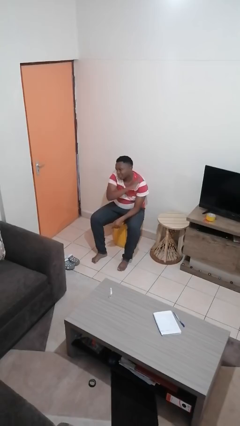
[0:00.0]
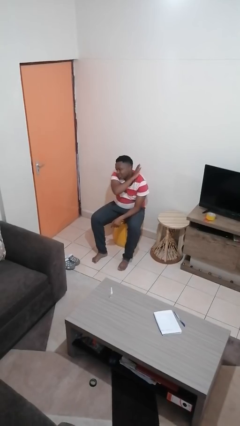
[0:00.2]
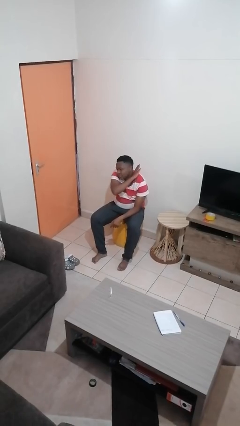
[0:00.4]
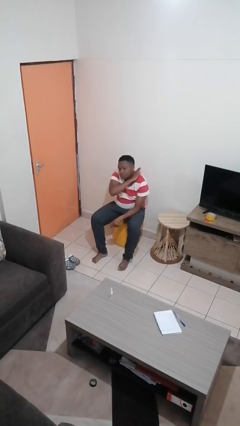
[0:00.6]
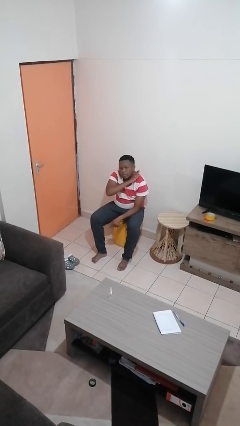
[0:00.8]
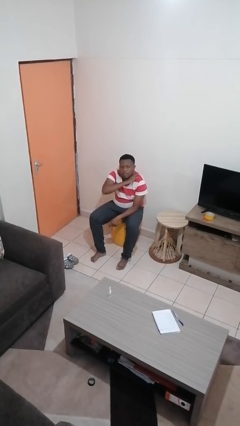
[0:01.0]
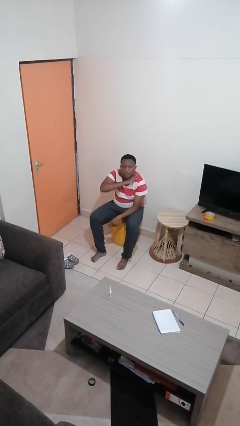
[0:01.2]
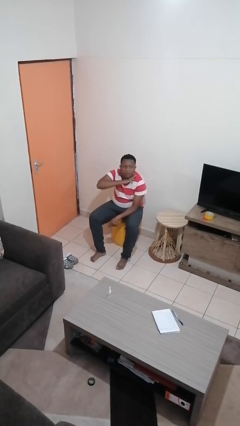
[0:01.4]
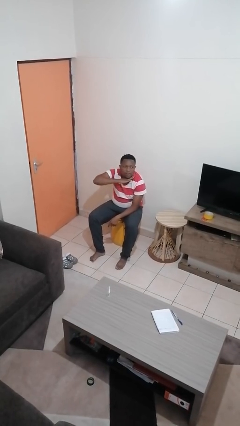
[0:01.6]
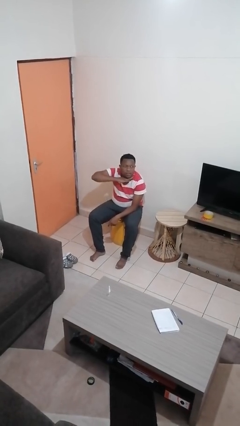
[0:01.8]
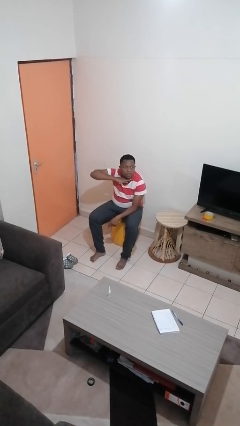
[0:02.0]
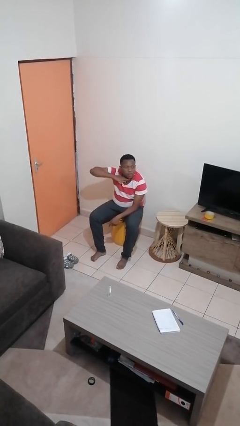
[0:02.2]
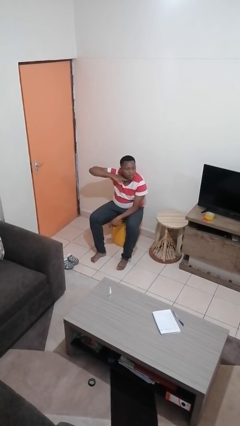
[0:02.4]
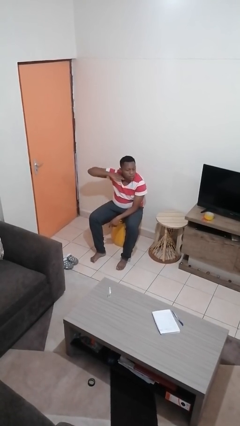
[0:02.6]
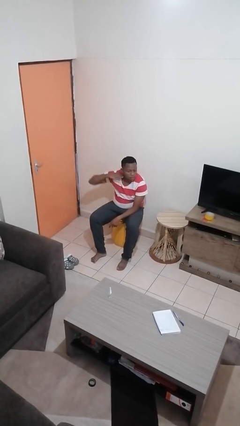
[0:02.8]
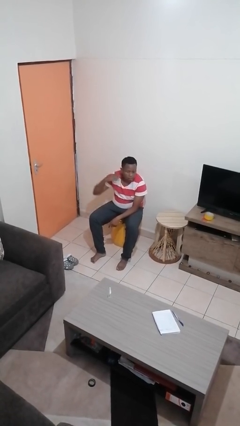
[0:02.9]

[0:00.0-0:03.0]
person gestures cut

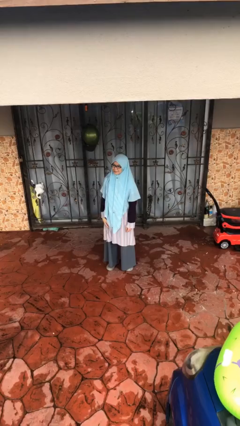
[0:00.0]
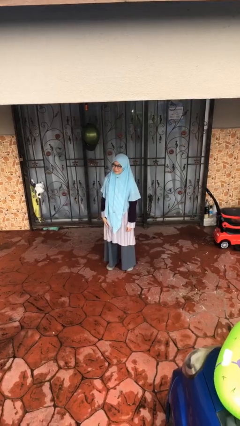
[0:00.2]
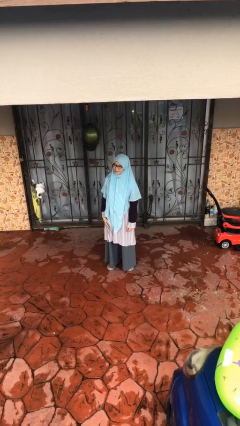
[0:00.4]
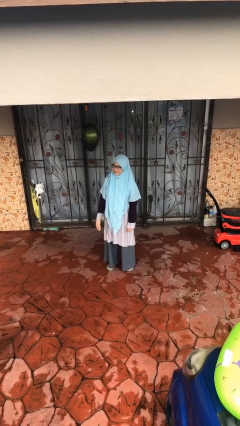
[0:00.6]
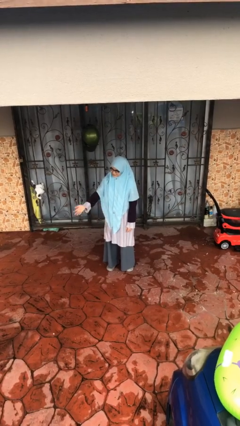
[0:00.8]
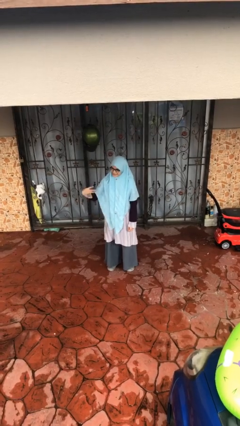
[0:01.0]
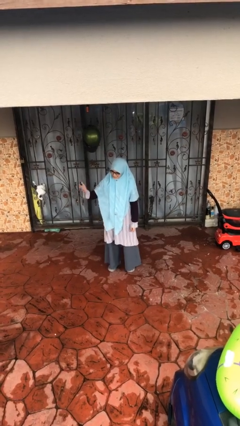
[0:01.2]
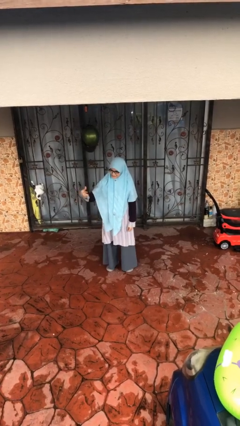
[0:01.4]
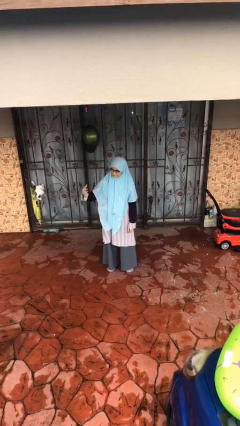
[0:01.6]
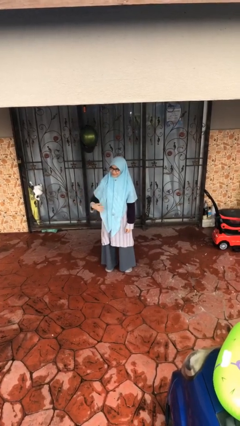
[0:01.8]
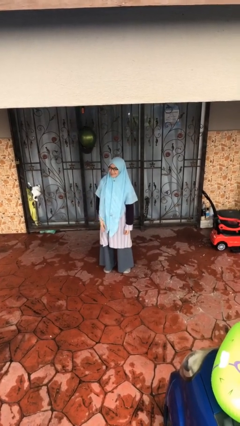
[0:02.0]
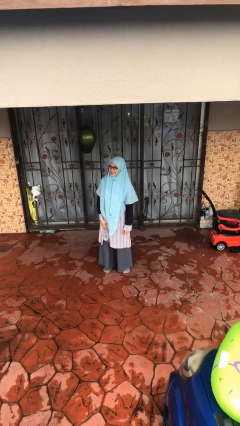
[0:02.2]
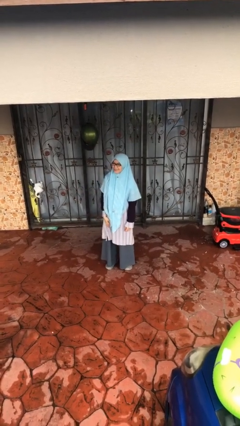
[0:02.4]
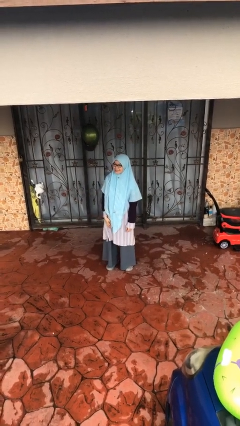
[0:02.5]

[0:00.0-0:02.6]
person gestures come here

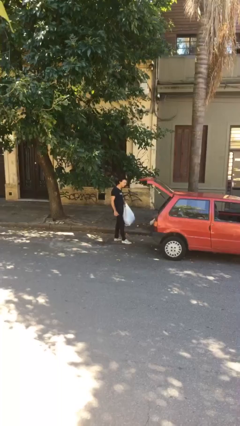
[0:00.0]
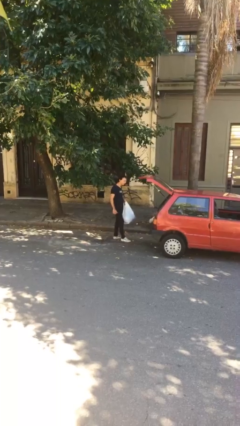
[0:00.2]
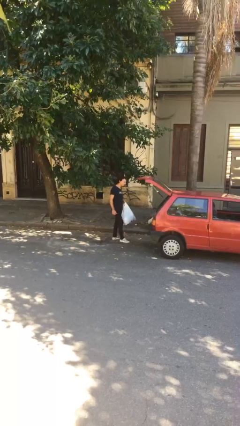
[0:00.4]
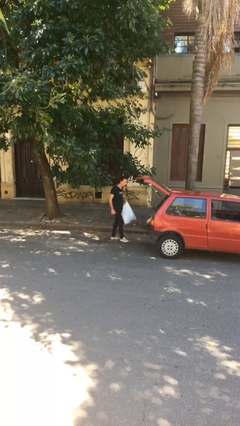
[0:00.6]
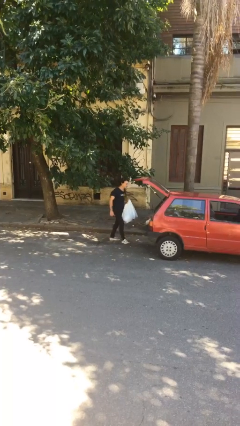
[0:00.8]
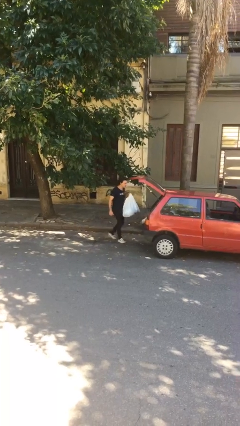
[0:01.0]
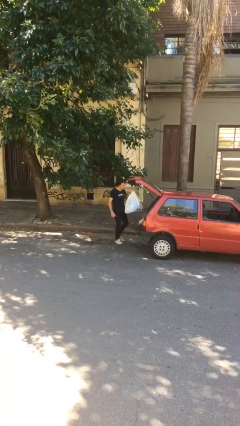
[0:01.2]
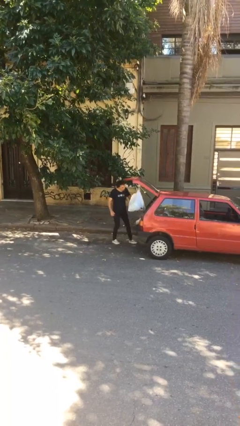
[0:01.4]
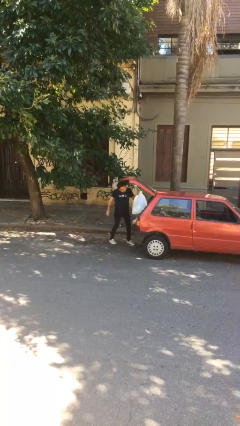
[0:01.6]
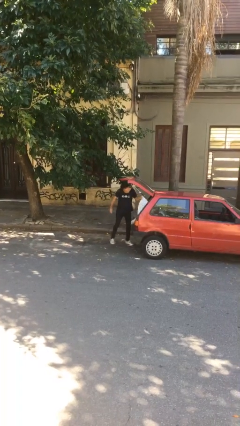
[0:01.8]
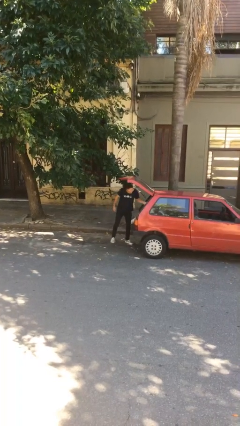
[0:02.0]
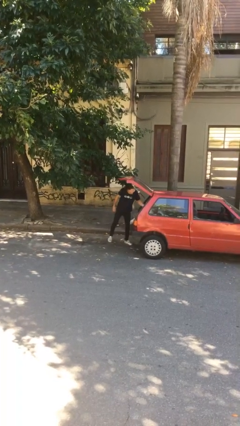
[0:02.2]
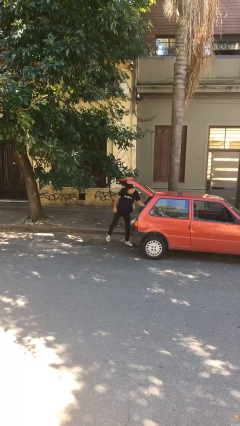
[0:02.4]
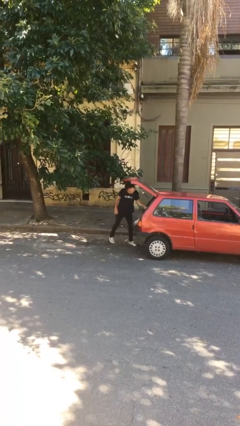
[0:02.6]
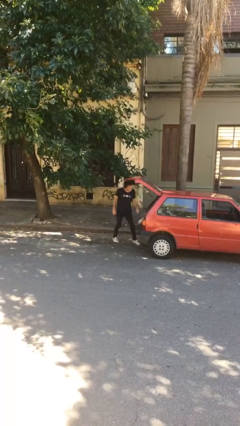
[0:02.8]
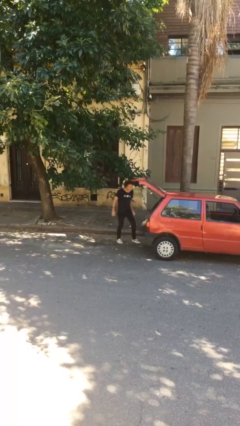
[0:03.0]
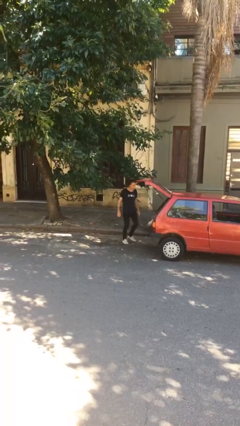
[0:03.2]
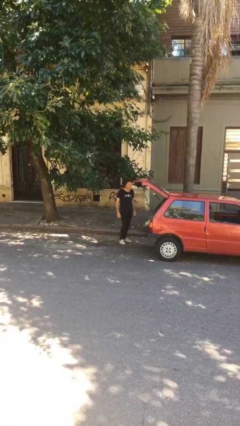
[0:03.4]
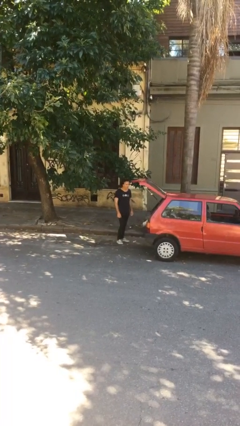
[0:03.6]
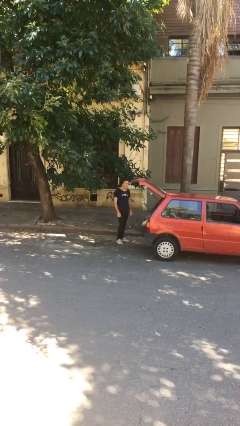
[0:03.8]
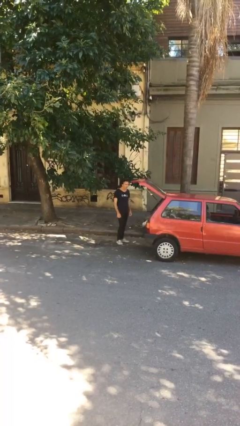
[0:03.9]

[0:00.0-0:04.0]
person loads car

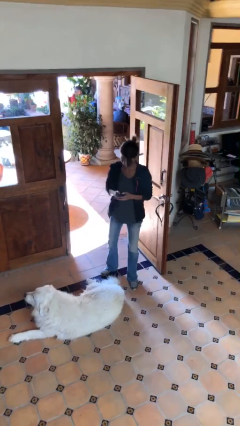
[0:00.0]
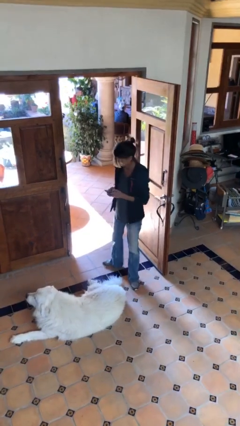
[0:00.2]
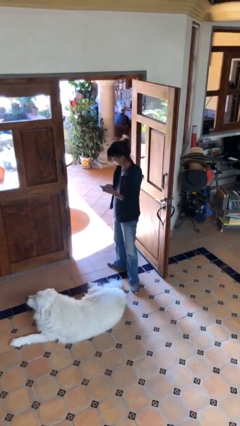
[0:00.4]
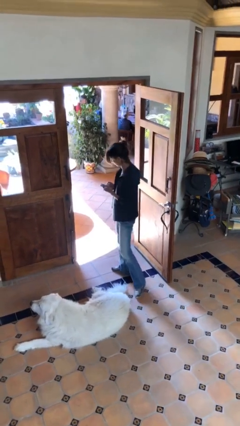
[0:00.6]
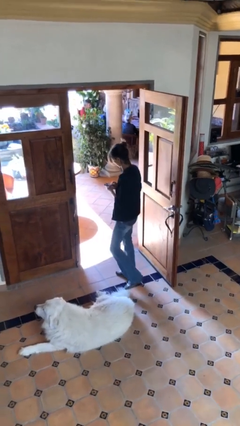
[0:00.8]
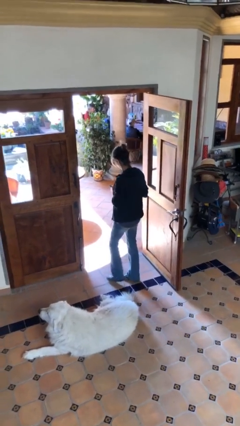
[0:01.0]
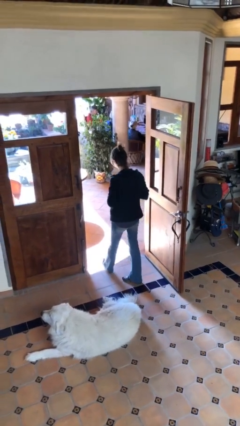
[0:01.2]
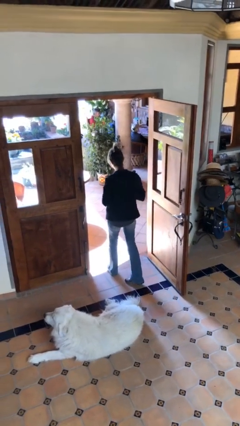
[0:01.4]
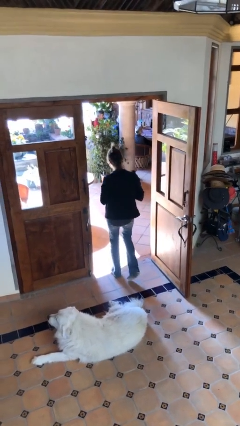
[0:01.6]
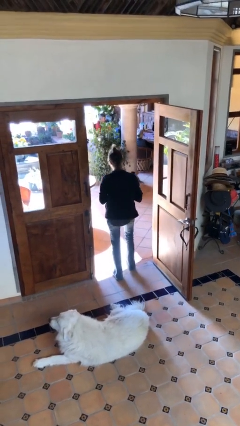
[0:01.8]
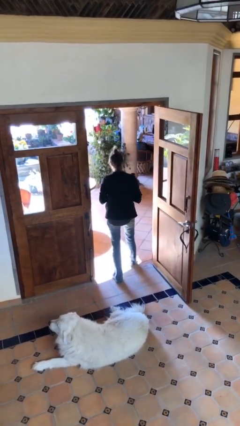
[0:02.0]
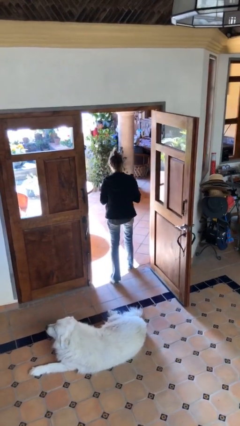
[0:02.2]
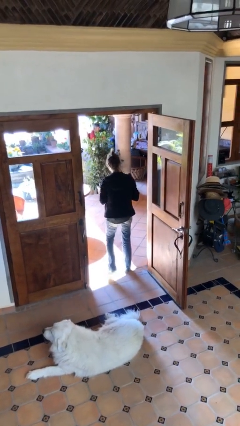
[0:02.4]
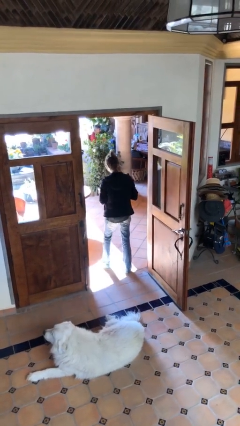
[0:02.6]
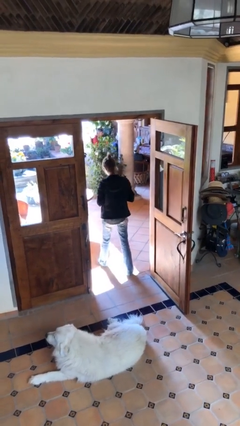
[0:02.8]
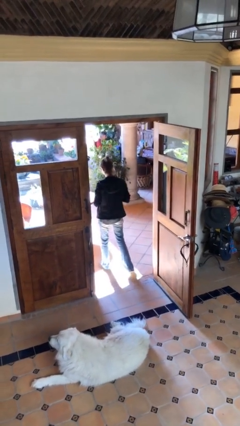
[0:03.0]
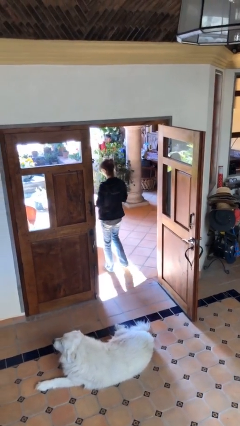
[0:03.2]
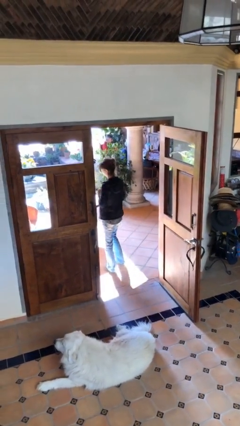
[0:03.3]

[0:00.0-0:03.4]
person exits scene through structure

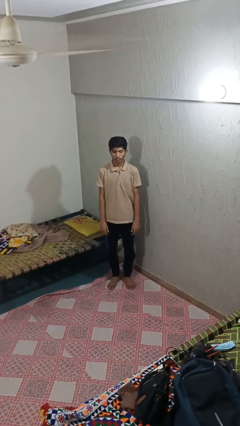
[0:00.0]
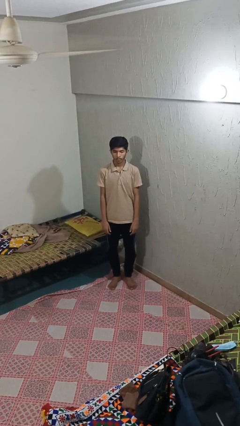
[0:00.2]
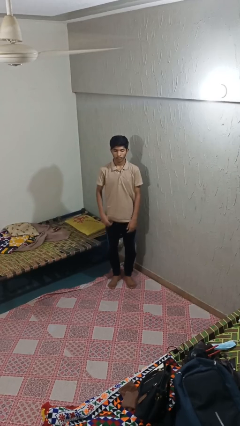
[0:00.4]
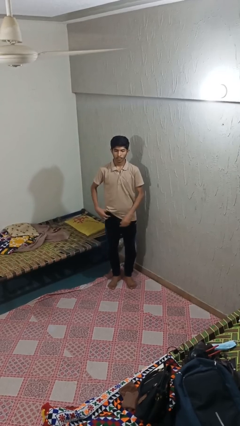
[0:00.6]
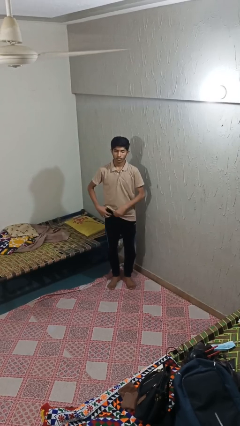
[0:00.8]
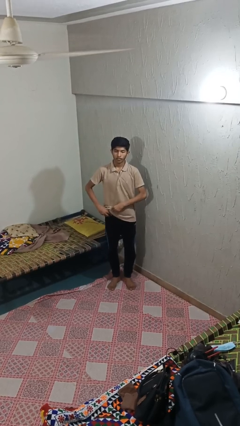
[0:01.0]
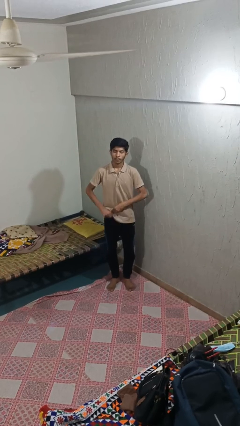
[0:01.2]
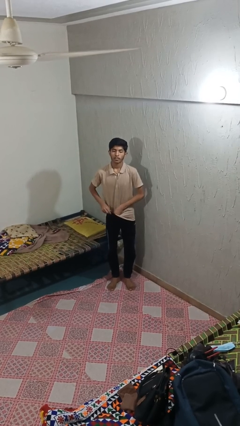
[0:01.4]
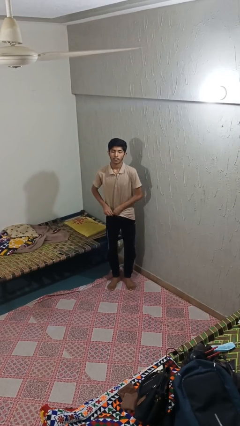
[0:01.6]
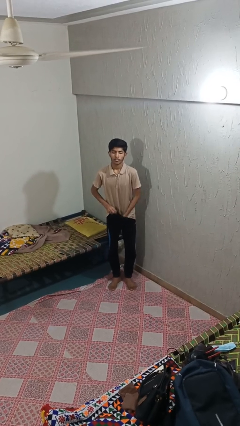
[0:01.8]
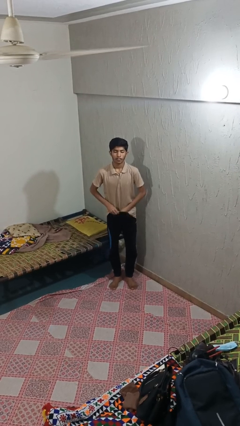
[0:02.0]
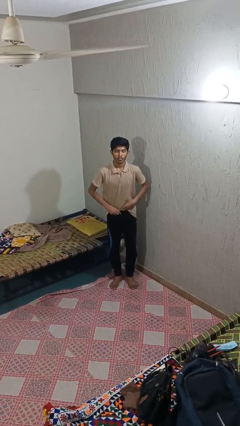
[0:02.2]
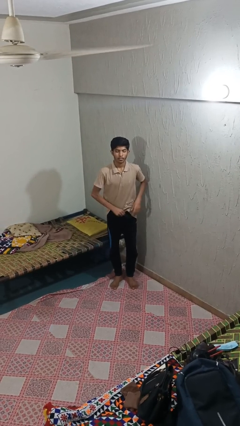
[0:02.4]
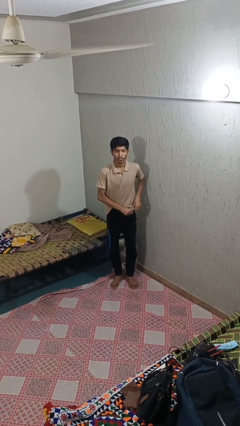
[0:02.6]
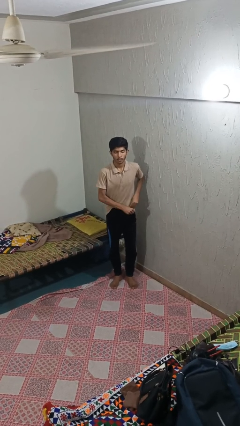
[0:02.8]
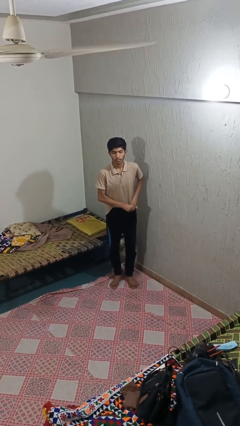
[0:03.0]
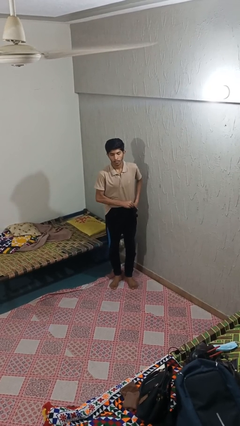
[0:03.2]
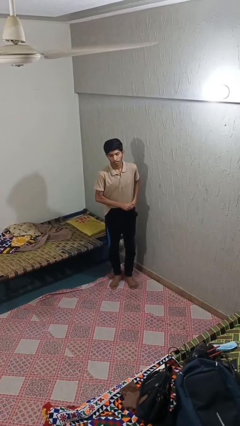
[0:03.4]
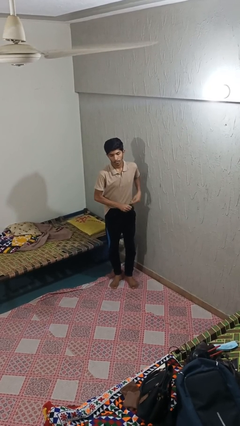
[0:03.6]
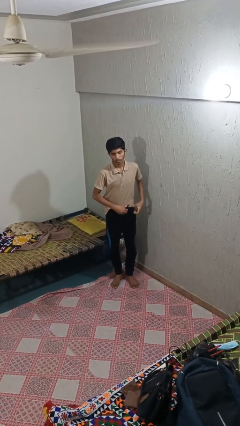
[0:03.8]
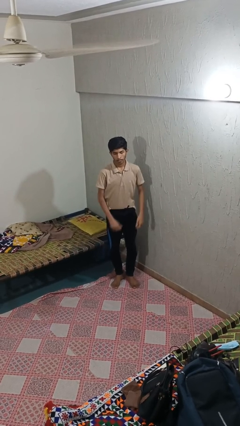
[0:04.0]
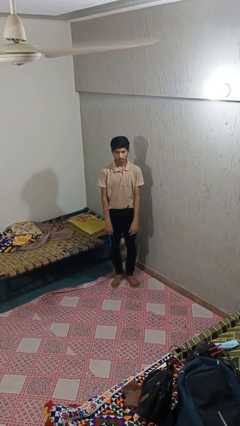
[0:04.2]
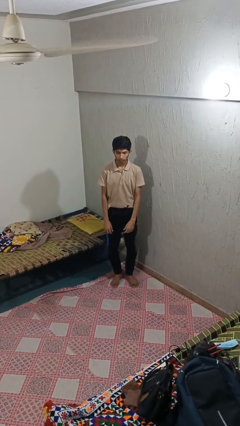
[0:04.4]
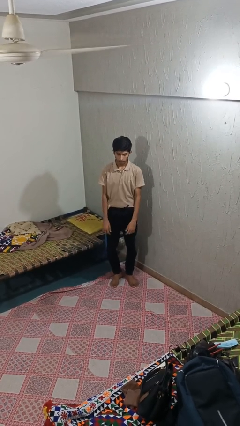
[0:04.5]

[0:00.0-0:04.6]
person tucks in shirt
